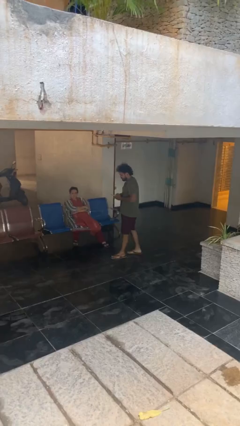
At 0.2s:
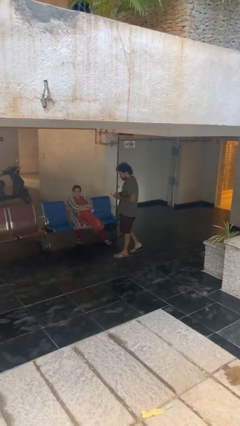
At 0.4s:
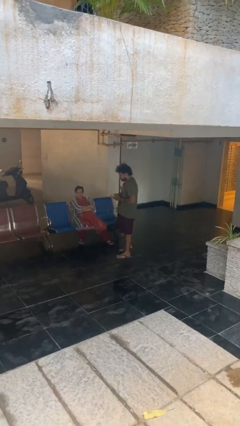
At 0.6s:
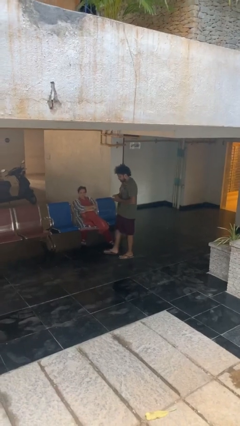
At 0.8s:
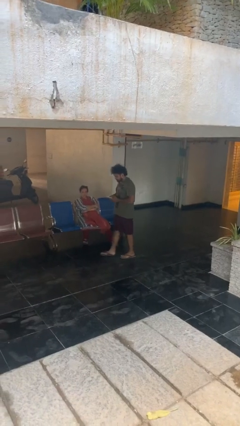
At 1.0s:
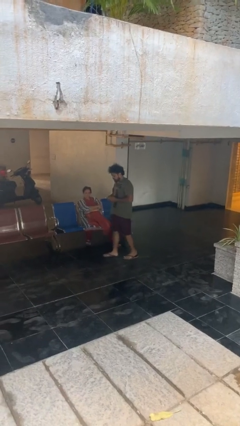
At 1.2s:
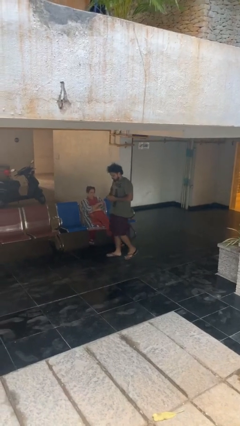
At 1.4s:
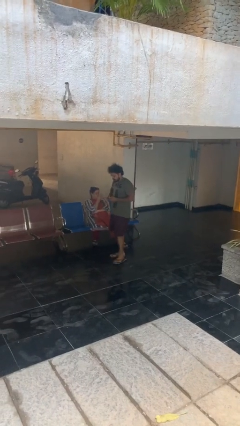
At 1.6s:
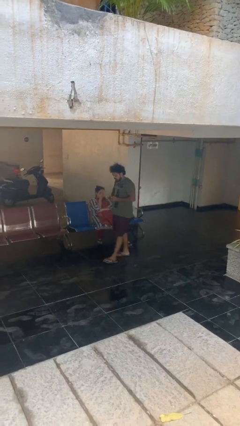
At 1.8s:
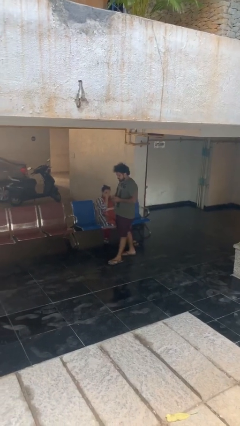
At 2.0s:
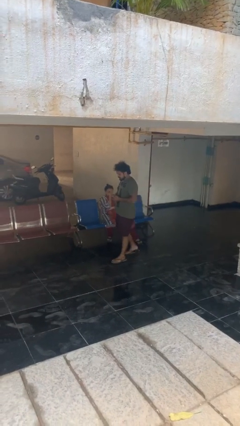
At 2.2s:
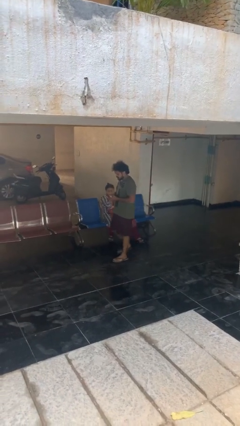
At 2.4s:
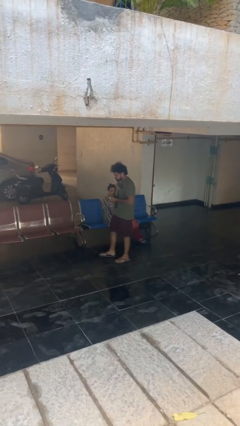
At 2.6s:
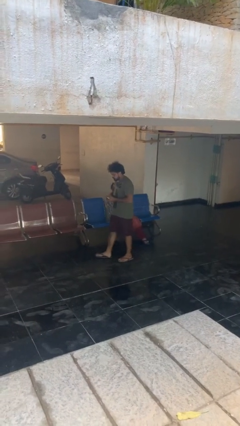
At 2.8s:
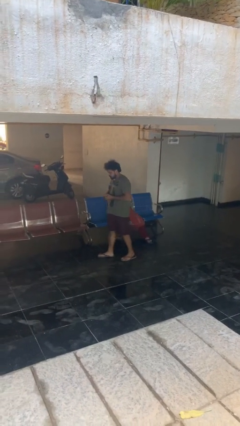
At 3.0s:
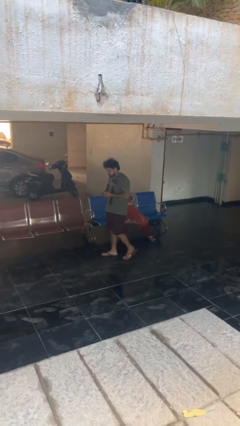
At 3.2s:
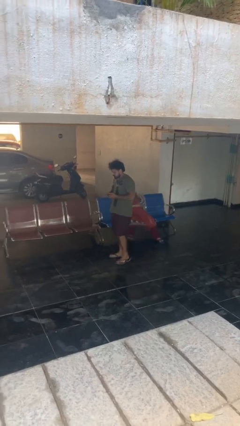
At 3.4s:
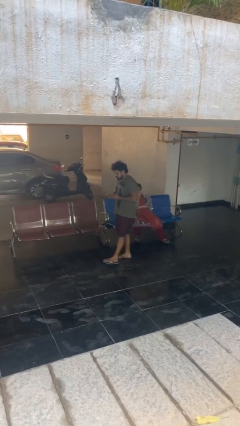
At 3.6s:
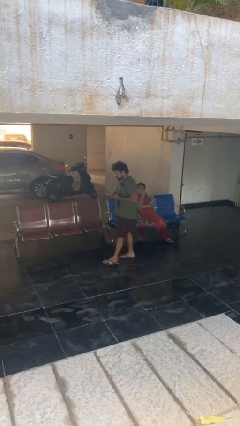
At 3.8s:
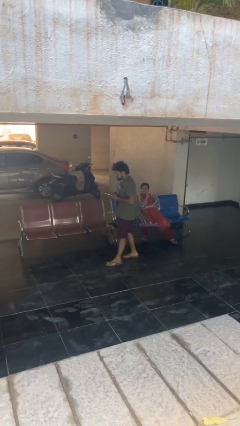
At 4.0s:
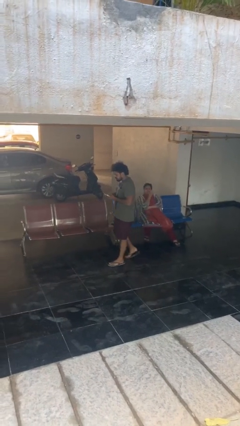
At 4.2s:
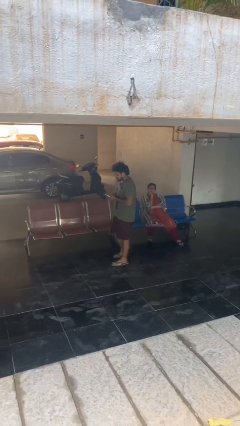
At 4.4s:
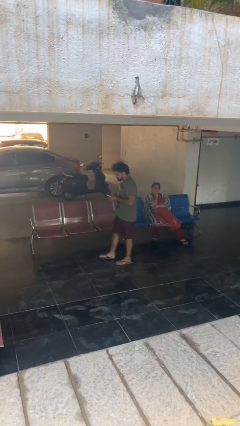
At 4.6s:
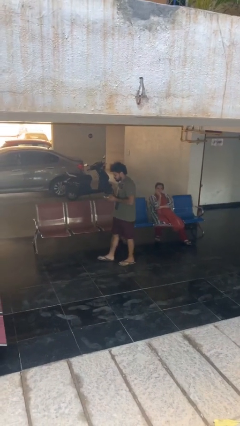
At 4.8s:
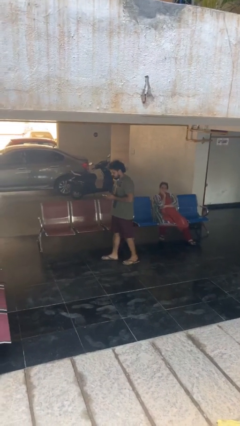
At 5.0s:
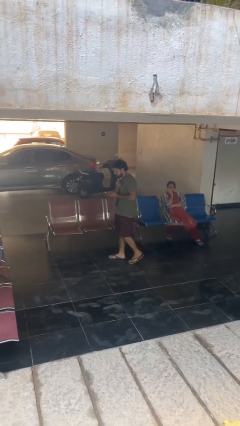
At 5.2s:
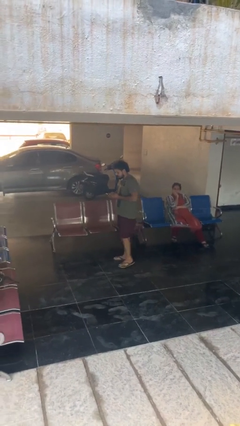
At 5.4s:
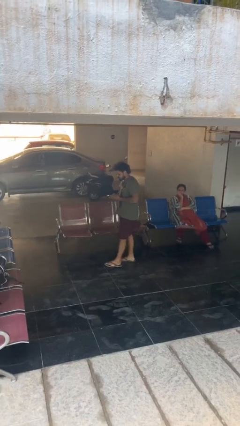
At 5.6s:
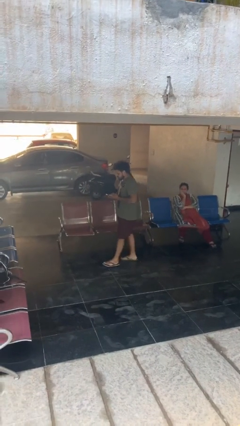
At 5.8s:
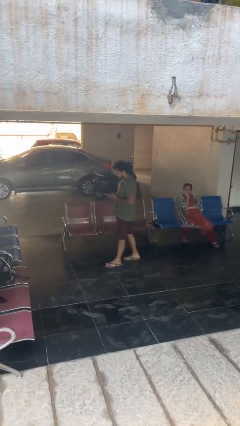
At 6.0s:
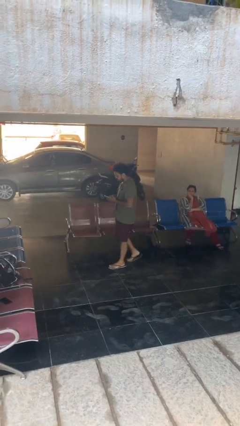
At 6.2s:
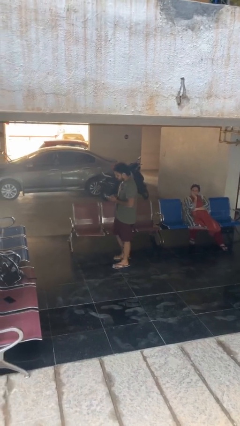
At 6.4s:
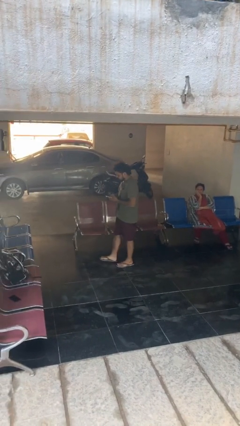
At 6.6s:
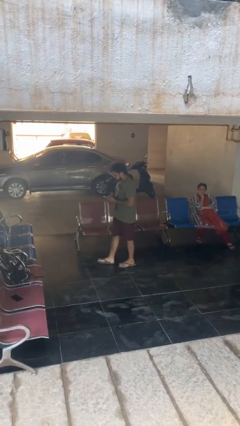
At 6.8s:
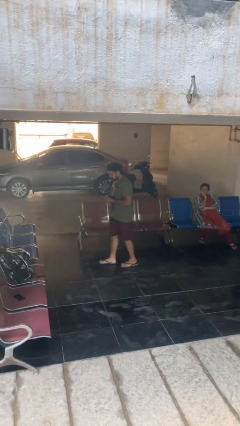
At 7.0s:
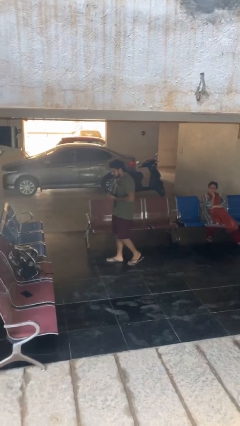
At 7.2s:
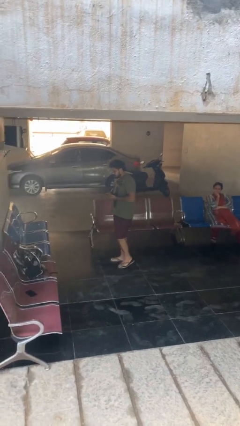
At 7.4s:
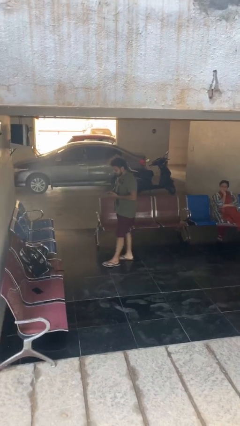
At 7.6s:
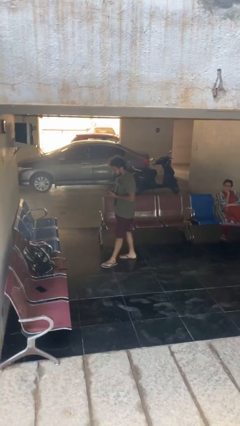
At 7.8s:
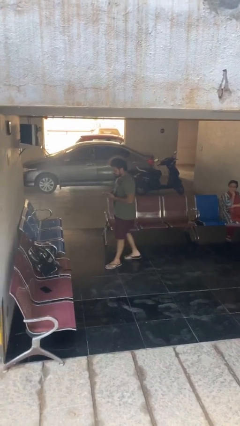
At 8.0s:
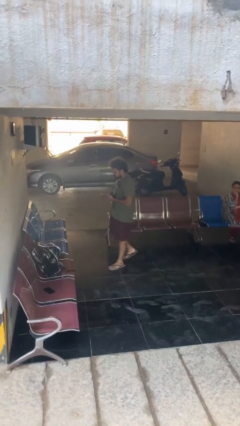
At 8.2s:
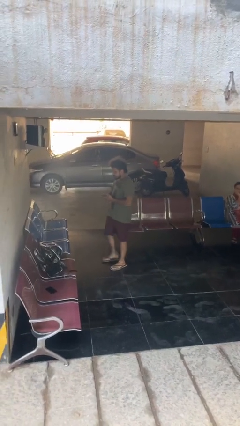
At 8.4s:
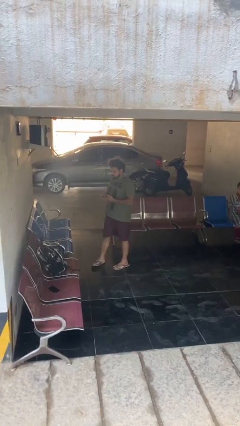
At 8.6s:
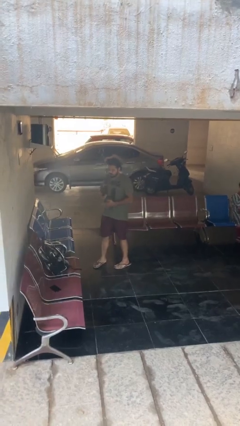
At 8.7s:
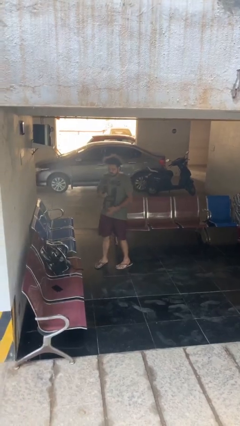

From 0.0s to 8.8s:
person texts on phone

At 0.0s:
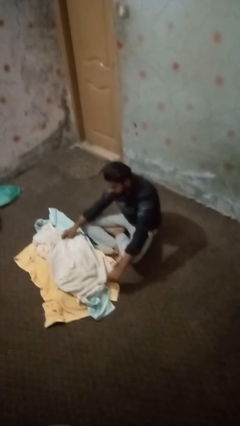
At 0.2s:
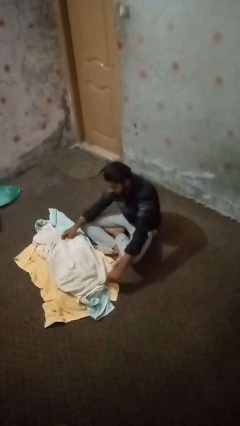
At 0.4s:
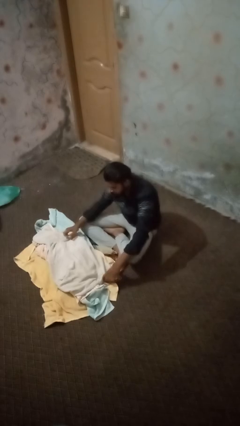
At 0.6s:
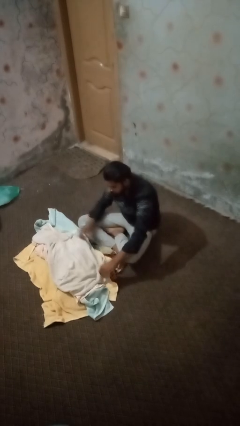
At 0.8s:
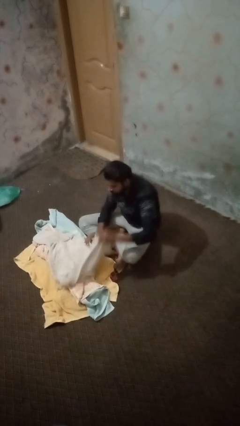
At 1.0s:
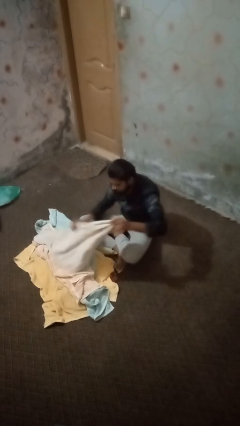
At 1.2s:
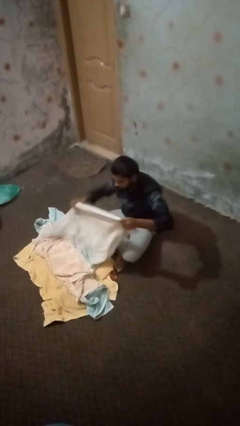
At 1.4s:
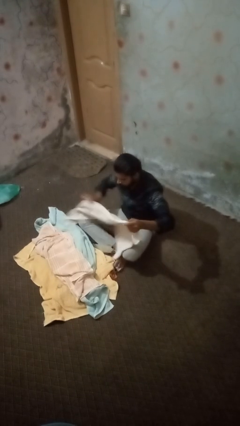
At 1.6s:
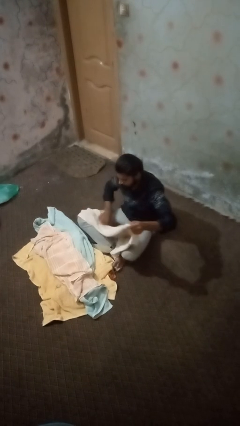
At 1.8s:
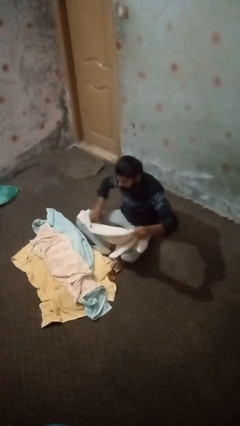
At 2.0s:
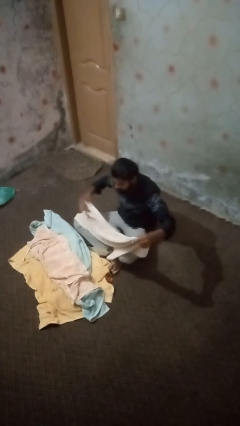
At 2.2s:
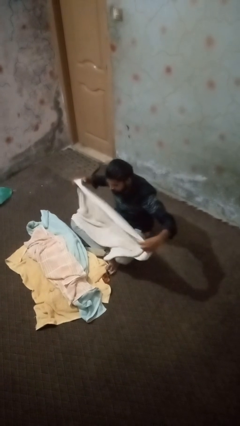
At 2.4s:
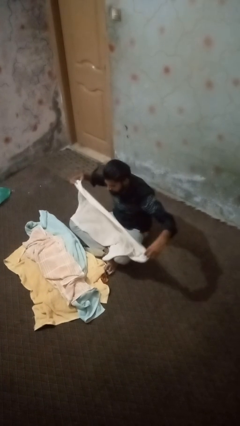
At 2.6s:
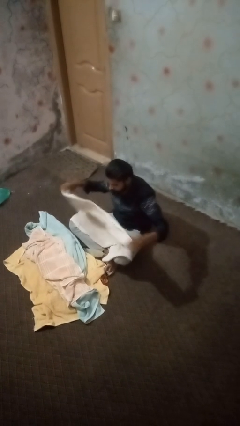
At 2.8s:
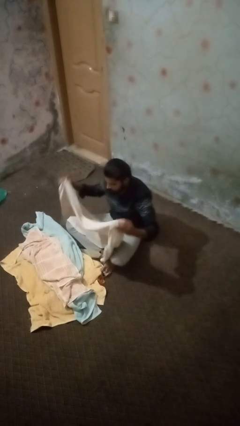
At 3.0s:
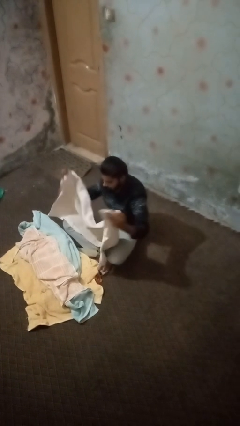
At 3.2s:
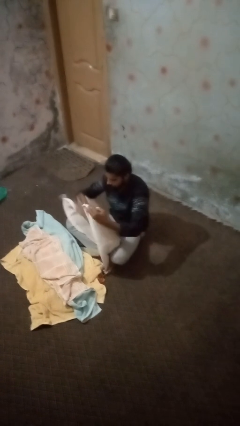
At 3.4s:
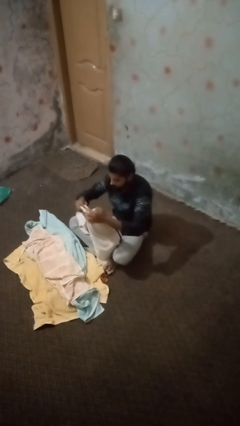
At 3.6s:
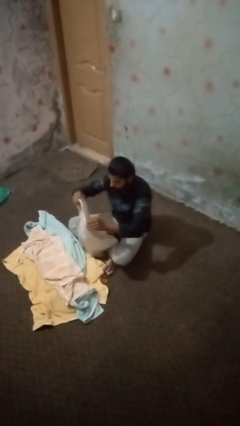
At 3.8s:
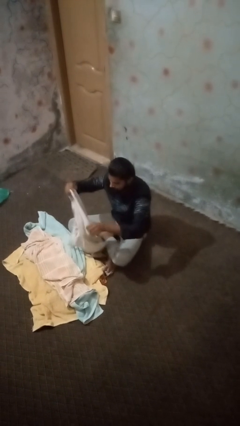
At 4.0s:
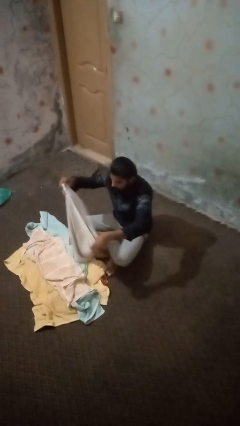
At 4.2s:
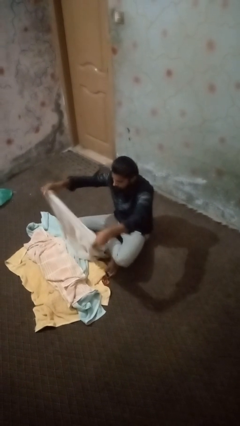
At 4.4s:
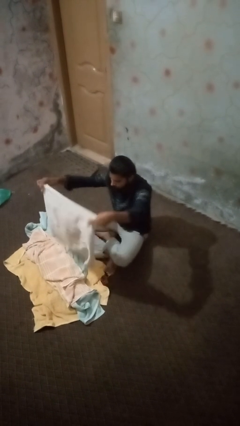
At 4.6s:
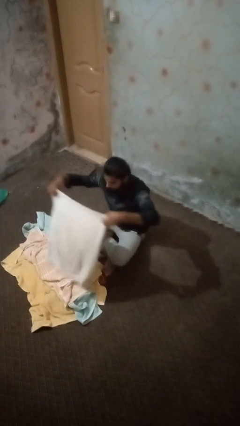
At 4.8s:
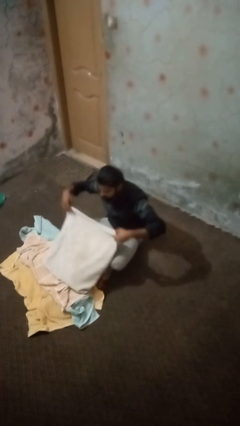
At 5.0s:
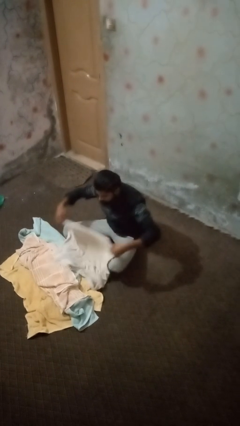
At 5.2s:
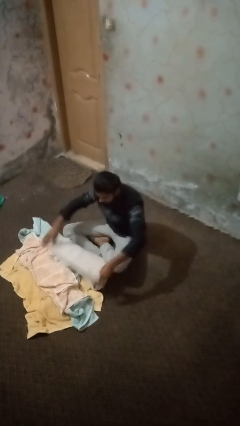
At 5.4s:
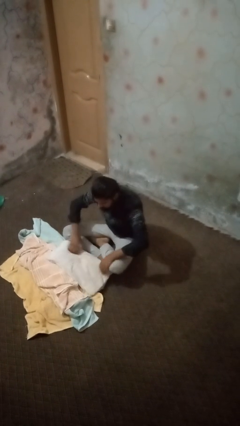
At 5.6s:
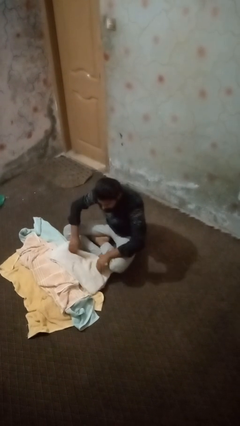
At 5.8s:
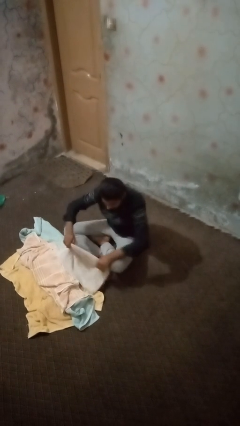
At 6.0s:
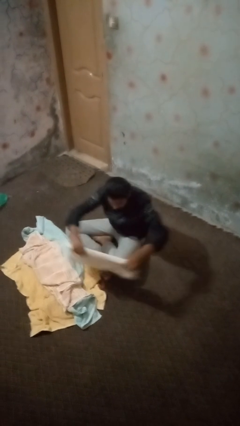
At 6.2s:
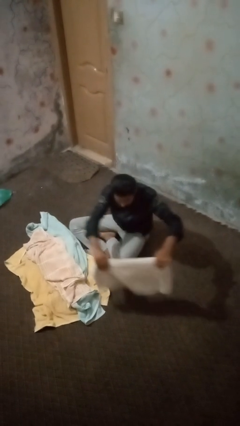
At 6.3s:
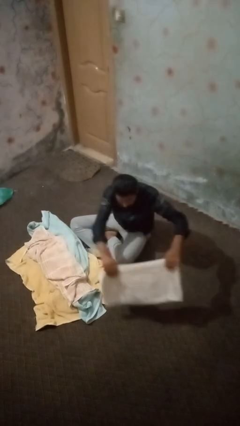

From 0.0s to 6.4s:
person folds towel

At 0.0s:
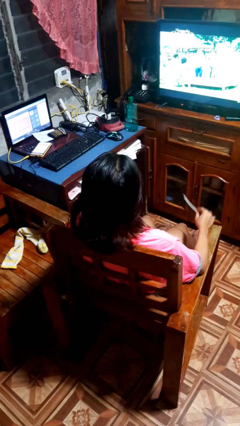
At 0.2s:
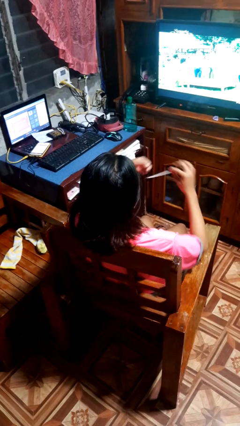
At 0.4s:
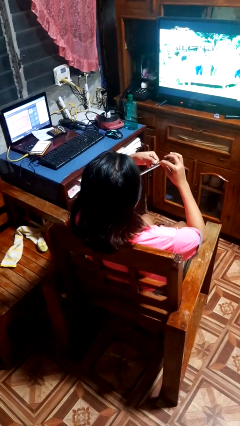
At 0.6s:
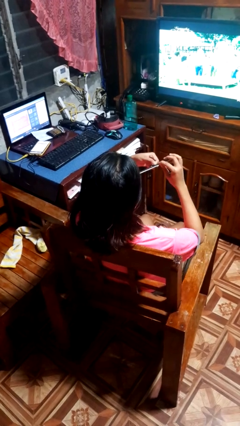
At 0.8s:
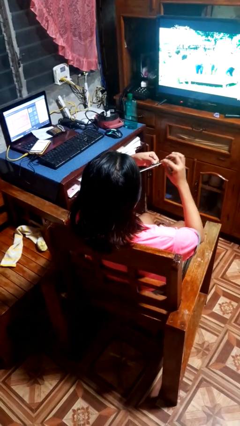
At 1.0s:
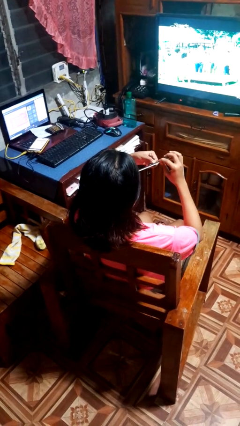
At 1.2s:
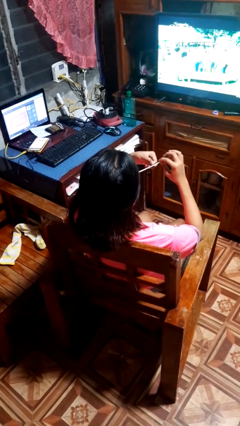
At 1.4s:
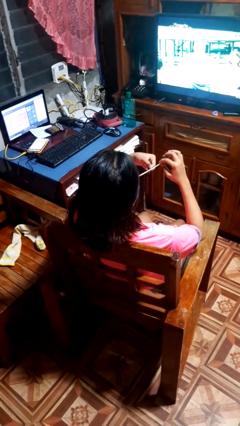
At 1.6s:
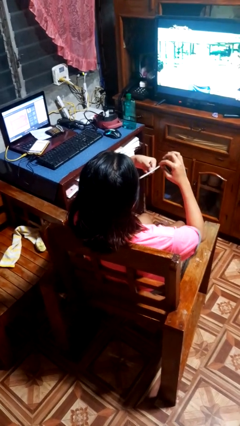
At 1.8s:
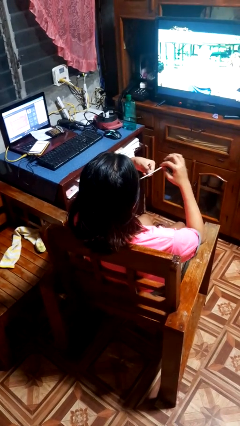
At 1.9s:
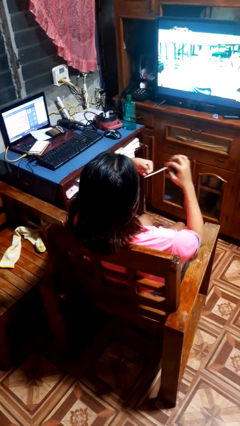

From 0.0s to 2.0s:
person files fingernails

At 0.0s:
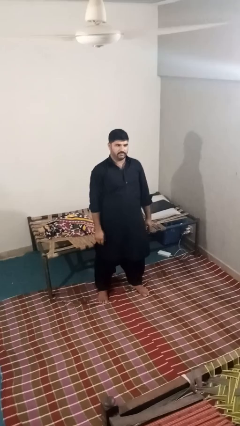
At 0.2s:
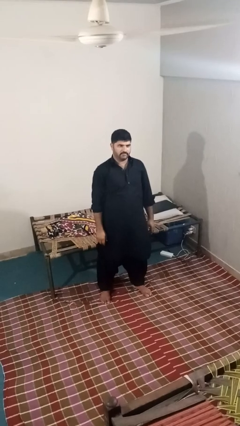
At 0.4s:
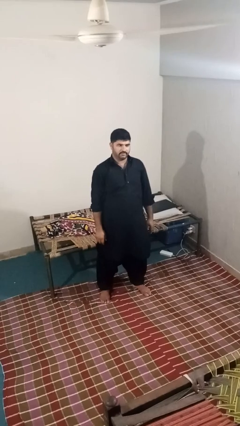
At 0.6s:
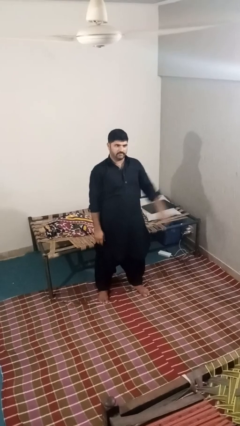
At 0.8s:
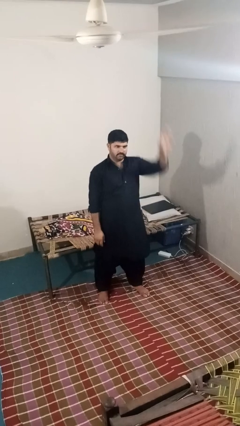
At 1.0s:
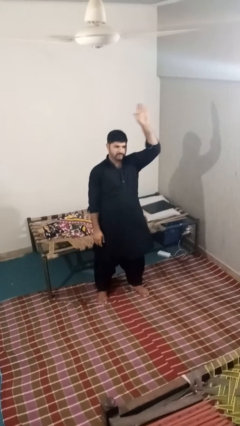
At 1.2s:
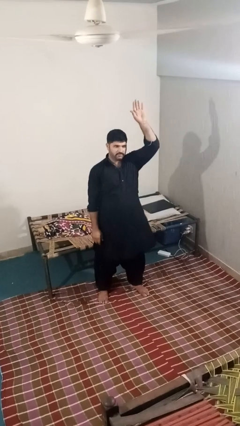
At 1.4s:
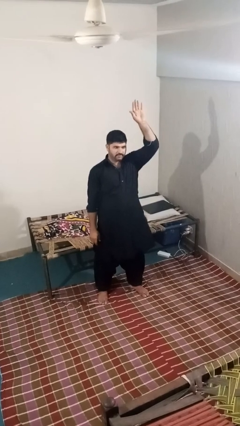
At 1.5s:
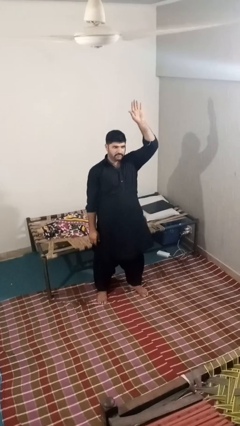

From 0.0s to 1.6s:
person gestures raise hand
